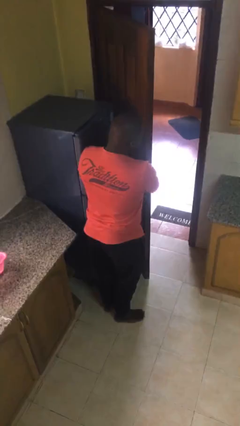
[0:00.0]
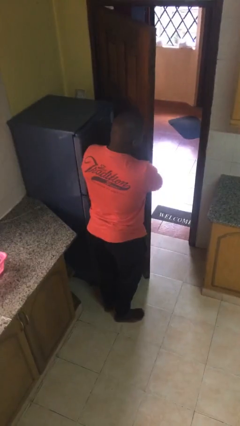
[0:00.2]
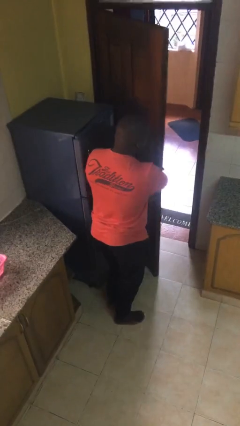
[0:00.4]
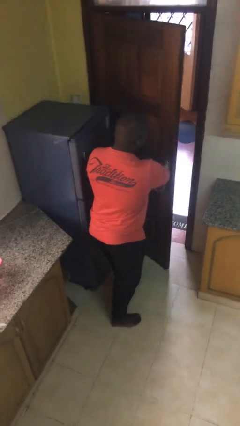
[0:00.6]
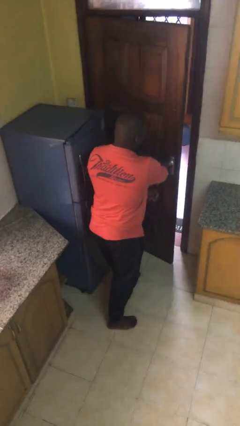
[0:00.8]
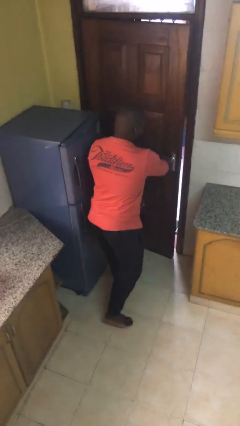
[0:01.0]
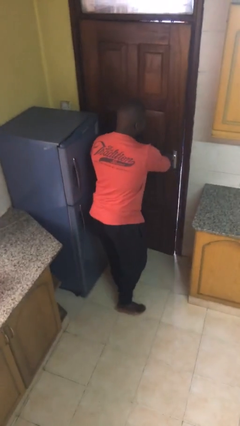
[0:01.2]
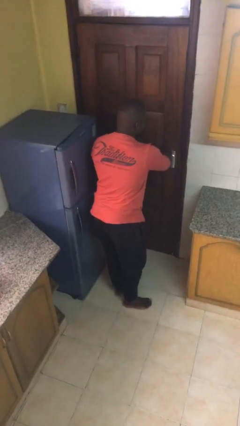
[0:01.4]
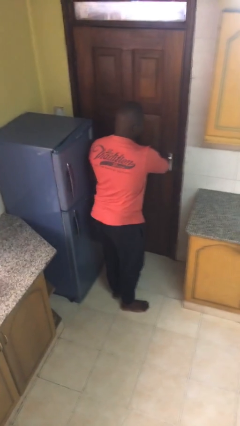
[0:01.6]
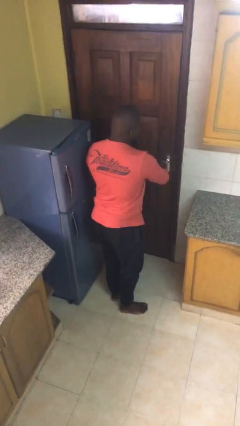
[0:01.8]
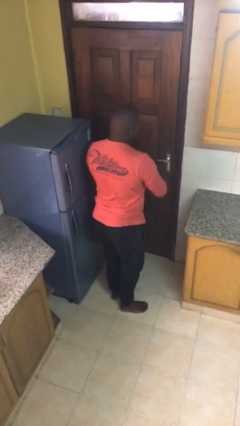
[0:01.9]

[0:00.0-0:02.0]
person closes facility door

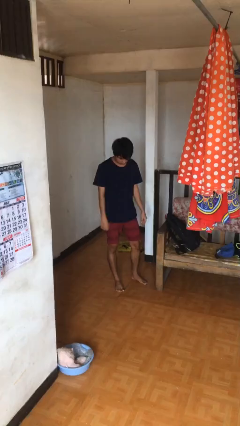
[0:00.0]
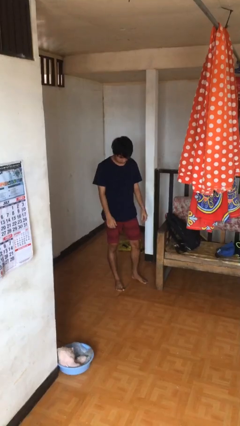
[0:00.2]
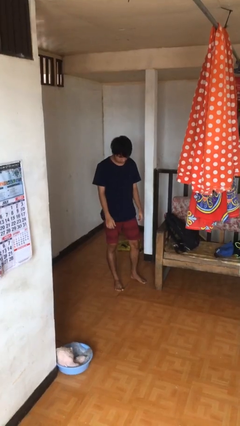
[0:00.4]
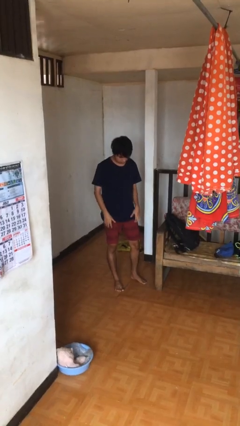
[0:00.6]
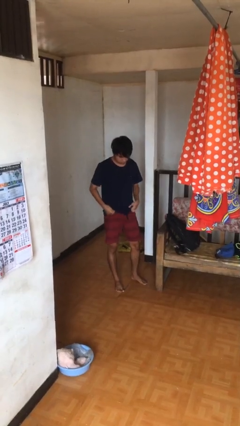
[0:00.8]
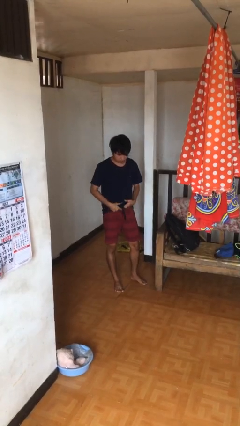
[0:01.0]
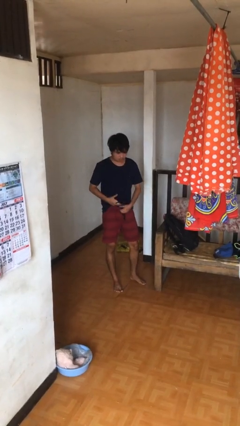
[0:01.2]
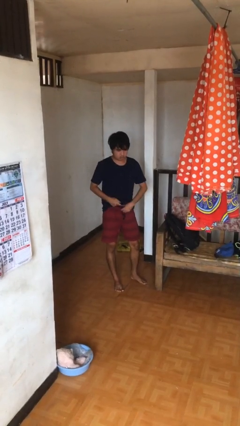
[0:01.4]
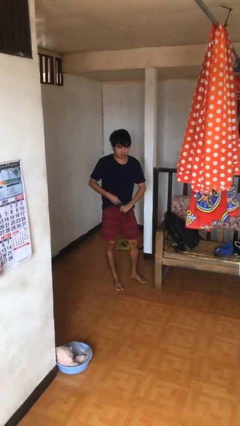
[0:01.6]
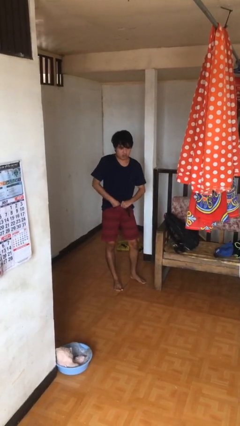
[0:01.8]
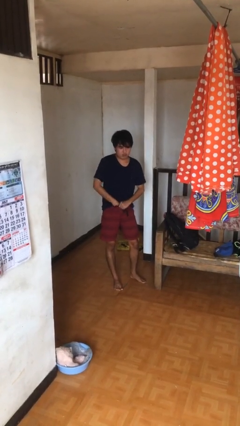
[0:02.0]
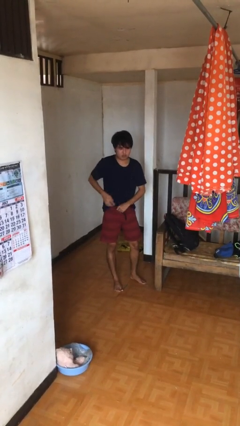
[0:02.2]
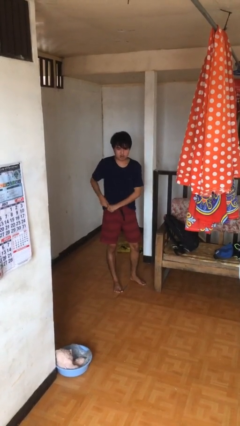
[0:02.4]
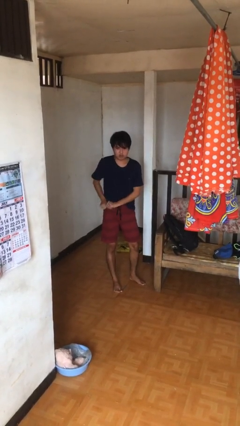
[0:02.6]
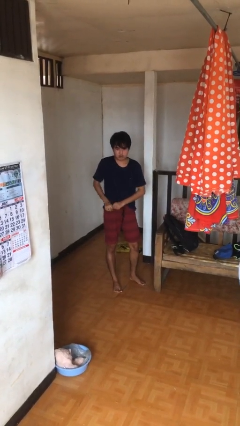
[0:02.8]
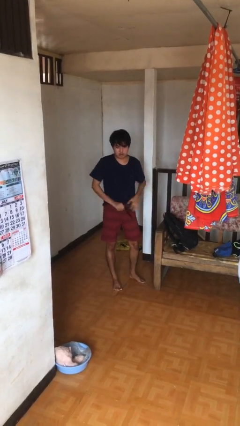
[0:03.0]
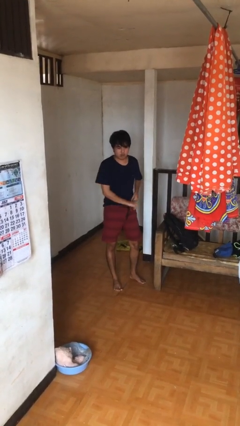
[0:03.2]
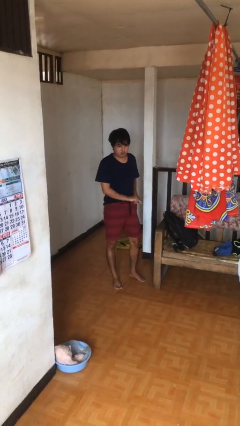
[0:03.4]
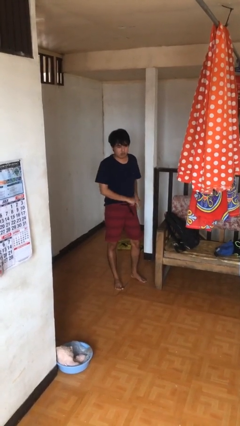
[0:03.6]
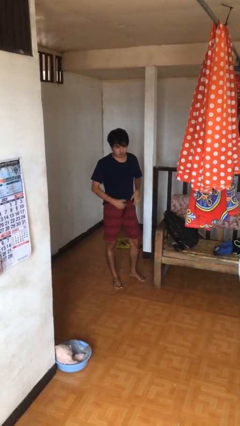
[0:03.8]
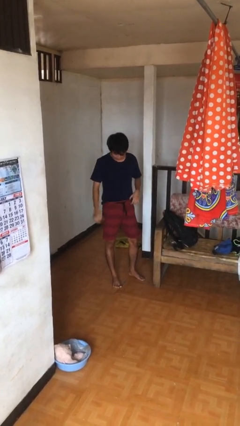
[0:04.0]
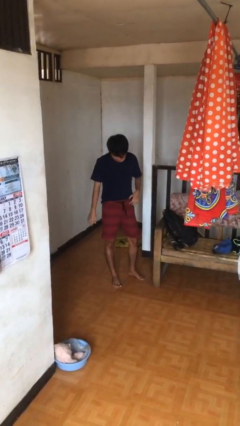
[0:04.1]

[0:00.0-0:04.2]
person tucks in shirt

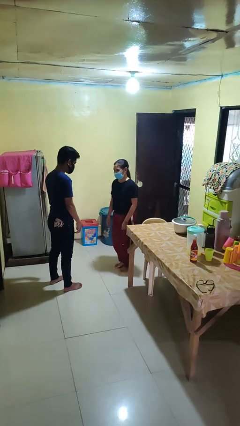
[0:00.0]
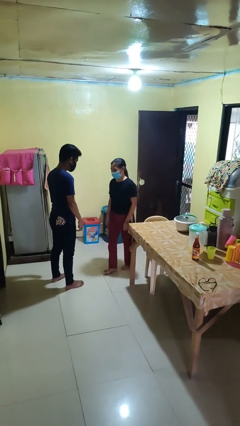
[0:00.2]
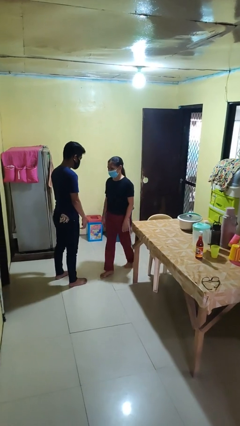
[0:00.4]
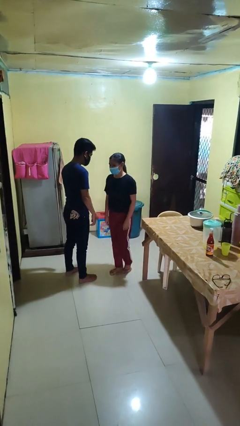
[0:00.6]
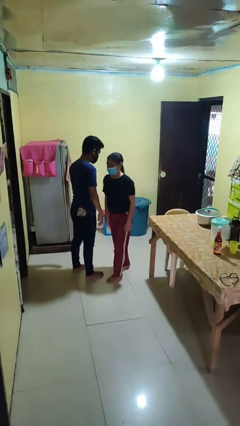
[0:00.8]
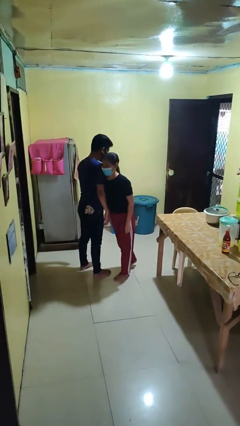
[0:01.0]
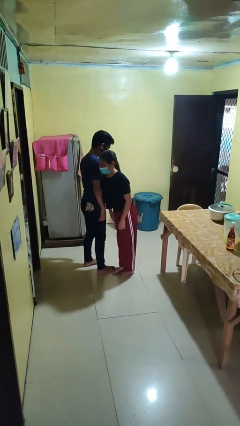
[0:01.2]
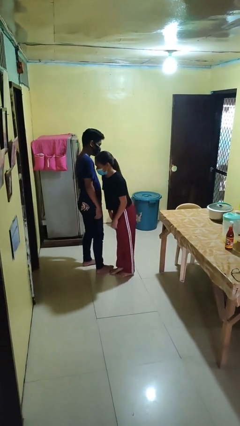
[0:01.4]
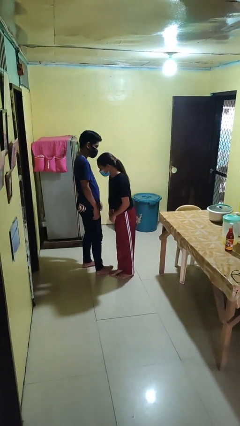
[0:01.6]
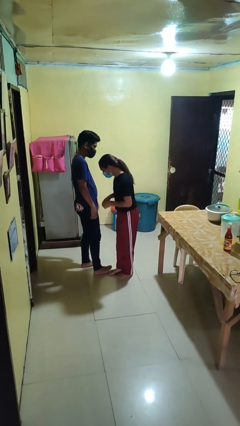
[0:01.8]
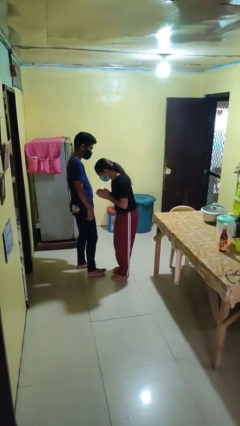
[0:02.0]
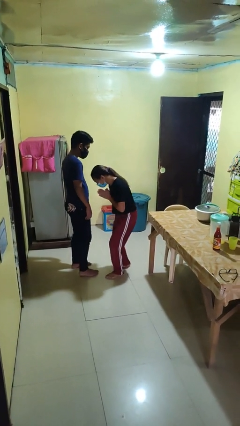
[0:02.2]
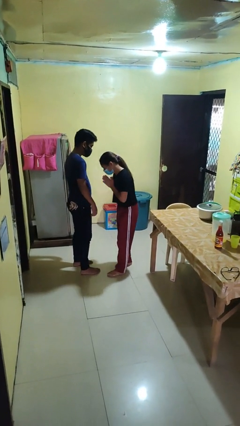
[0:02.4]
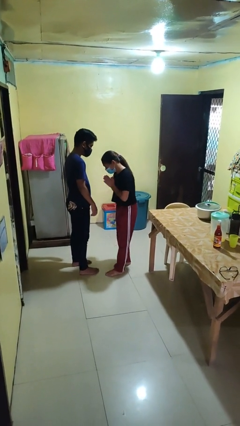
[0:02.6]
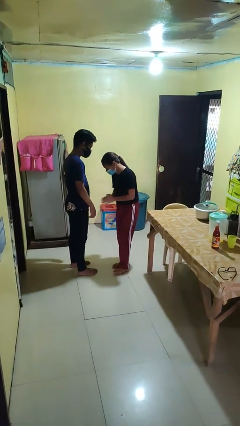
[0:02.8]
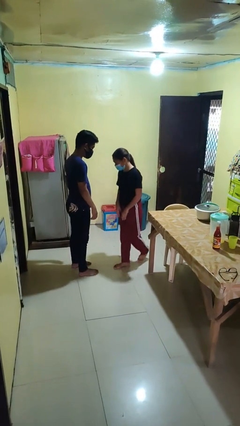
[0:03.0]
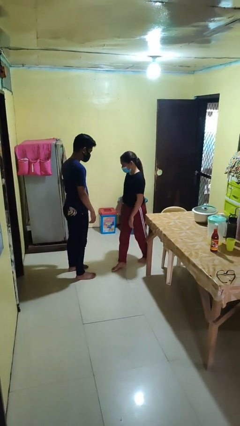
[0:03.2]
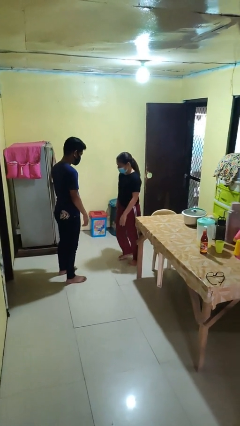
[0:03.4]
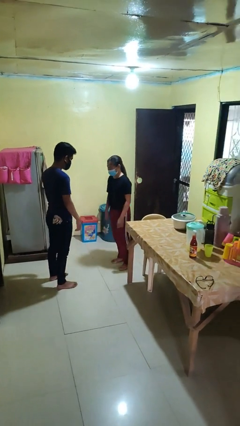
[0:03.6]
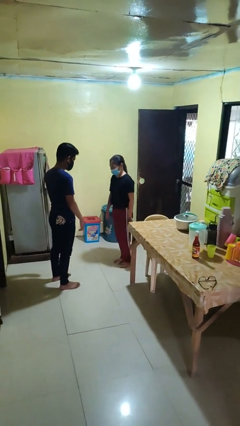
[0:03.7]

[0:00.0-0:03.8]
person bumps into person

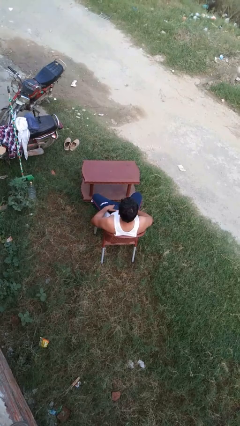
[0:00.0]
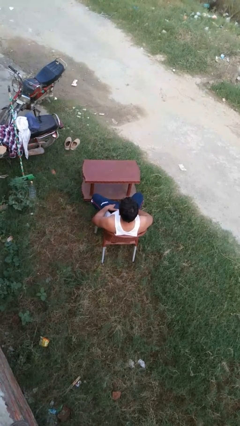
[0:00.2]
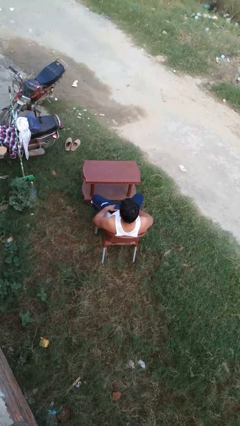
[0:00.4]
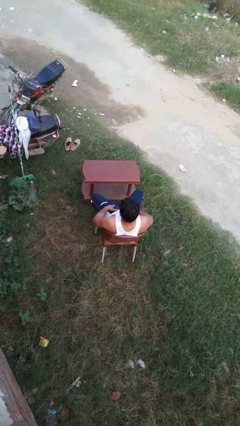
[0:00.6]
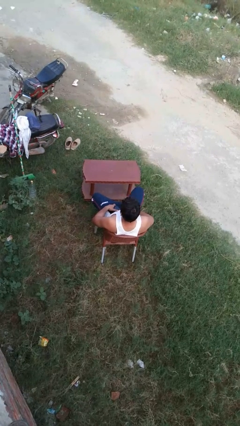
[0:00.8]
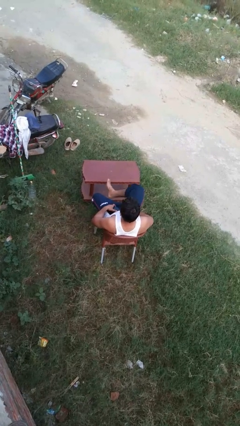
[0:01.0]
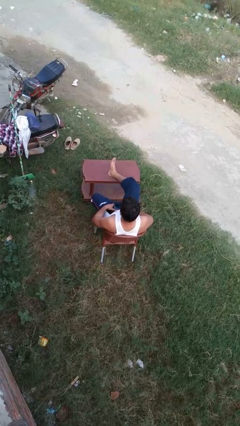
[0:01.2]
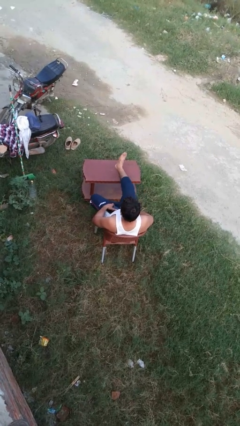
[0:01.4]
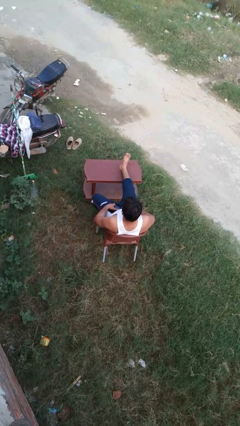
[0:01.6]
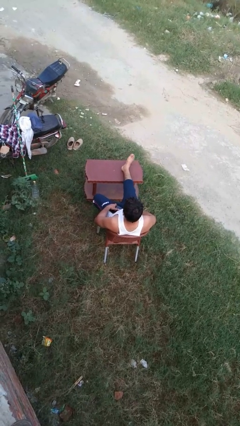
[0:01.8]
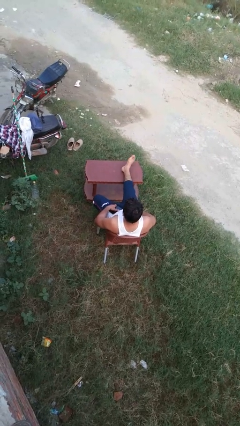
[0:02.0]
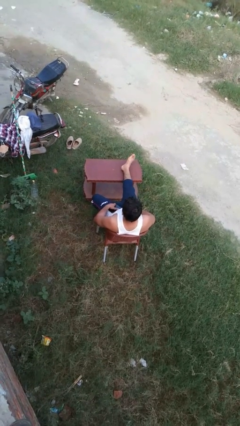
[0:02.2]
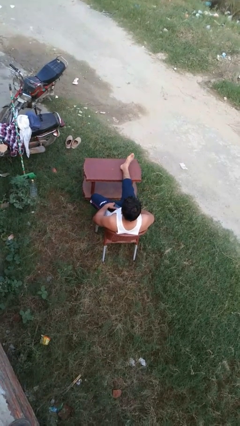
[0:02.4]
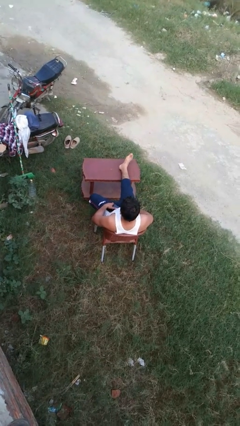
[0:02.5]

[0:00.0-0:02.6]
person puts feet up

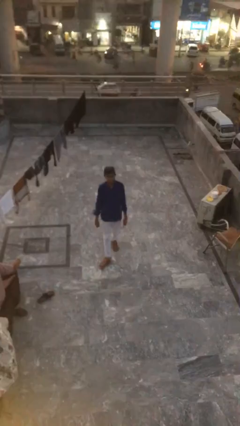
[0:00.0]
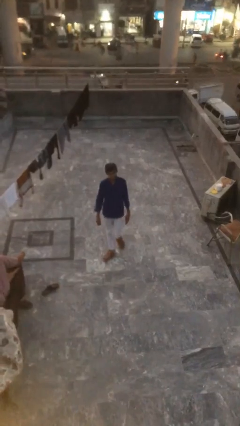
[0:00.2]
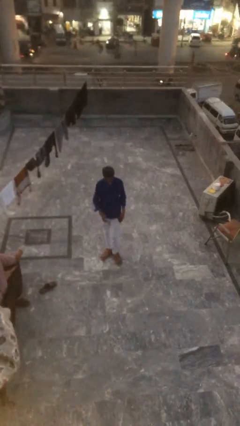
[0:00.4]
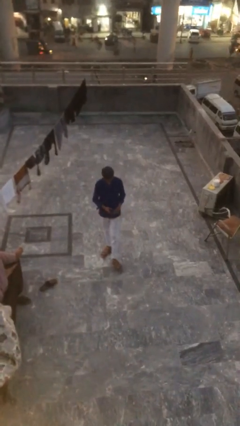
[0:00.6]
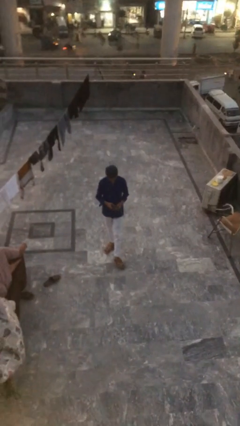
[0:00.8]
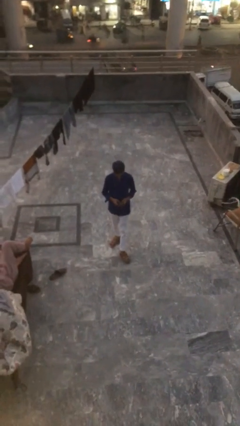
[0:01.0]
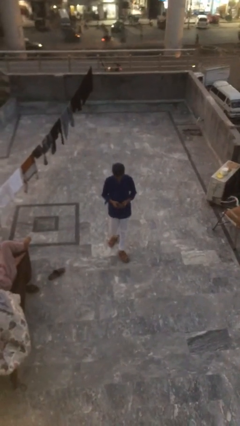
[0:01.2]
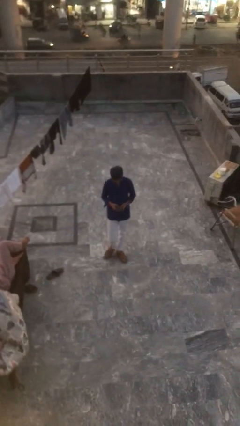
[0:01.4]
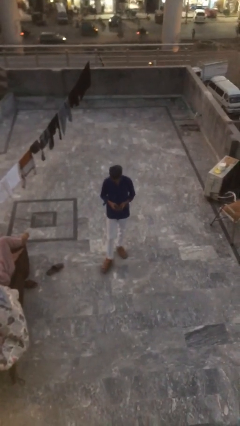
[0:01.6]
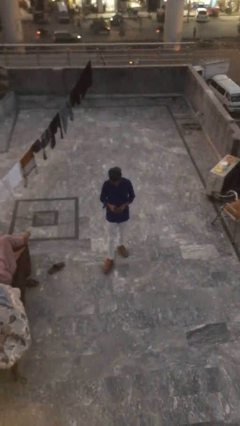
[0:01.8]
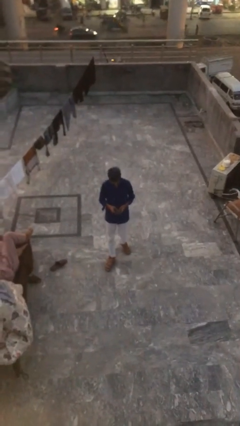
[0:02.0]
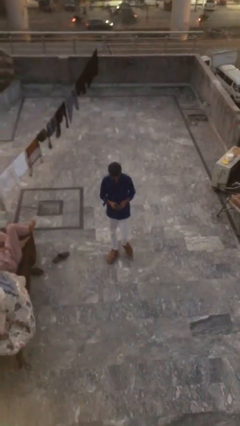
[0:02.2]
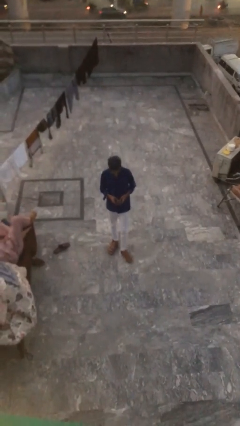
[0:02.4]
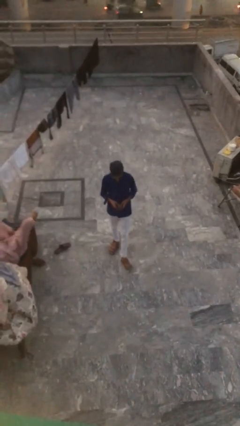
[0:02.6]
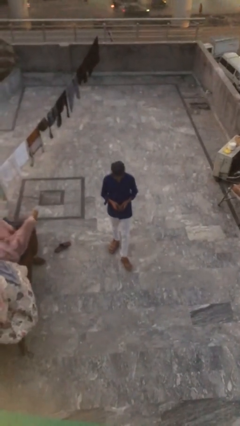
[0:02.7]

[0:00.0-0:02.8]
person texts on phone

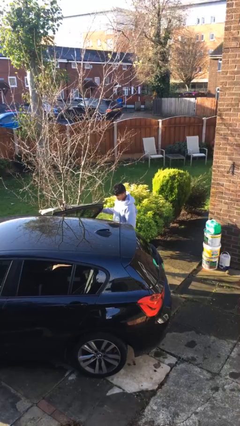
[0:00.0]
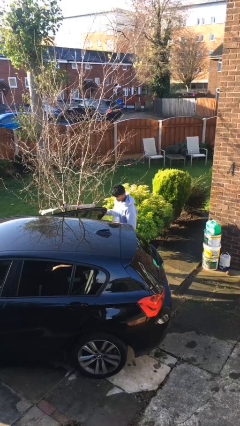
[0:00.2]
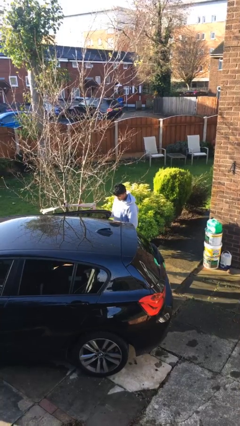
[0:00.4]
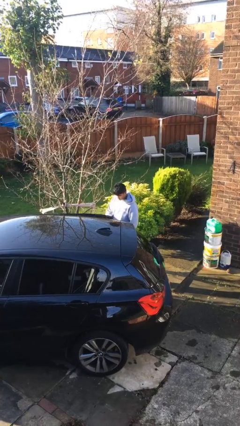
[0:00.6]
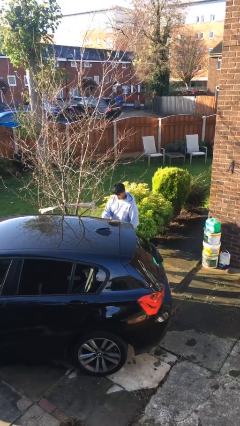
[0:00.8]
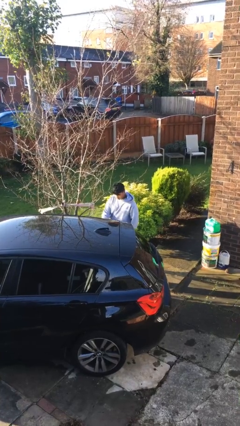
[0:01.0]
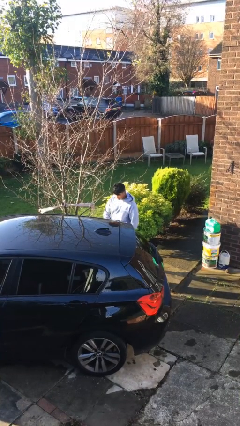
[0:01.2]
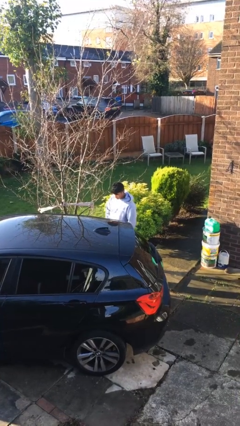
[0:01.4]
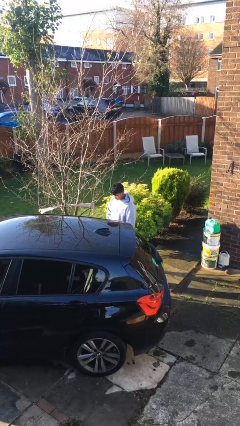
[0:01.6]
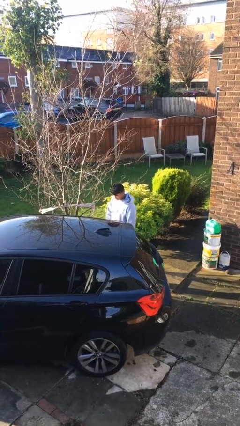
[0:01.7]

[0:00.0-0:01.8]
person closes car door

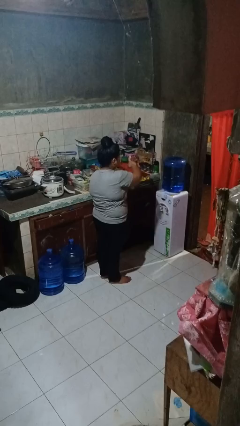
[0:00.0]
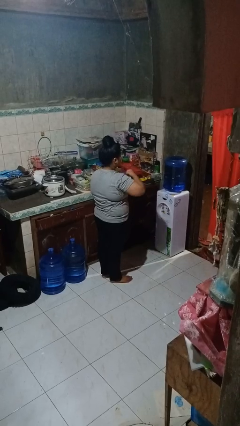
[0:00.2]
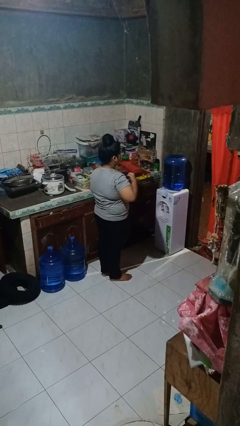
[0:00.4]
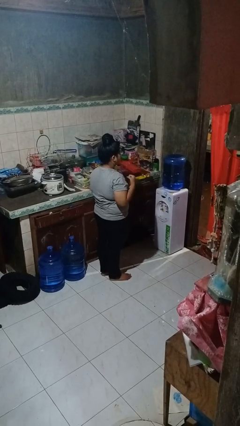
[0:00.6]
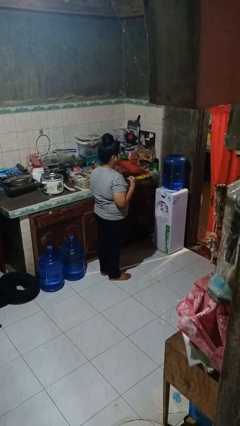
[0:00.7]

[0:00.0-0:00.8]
person punches
